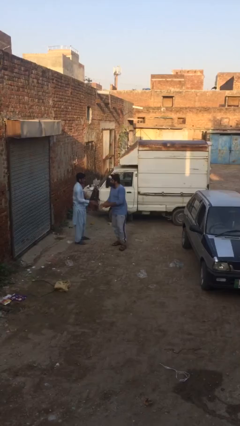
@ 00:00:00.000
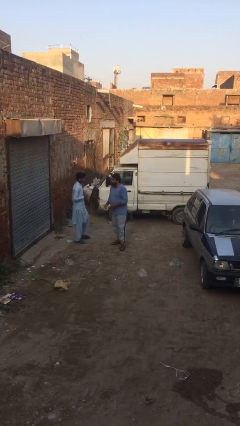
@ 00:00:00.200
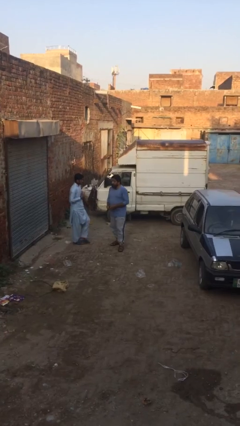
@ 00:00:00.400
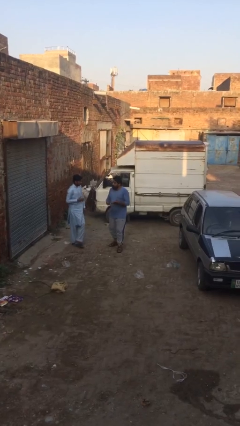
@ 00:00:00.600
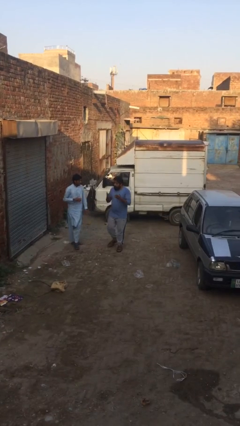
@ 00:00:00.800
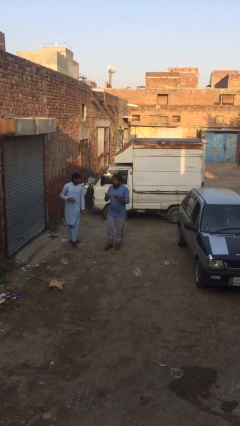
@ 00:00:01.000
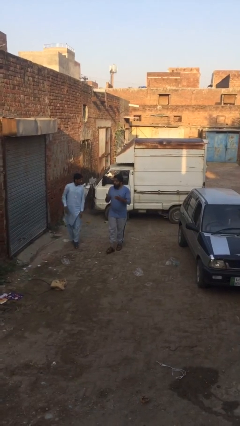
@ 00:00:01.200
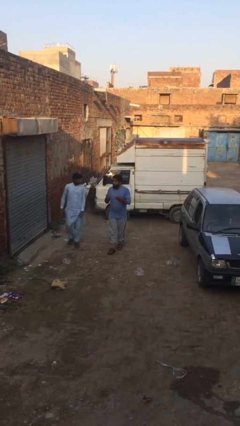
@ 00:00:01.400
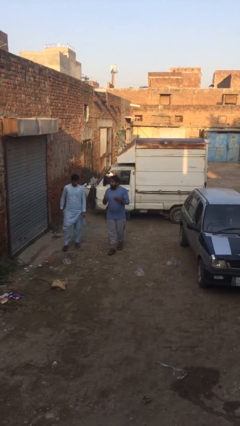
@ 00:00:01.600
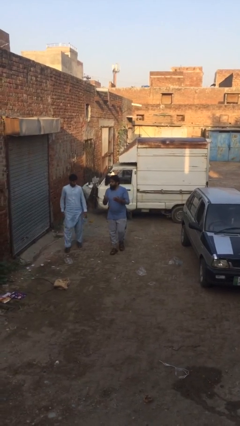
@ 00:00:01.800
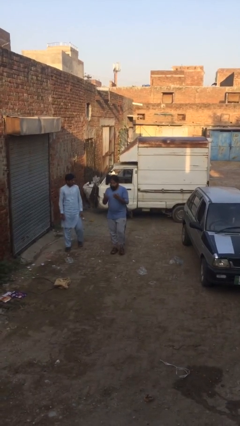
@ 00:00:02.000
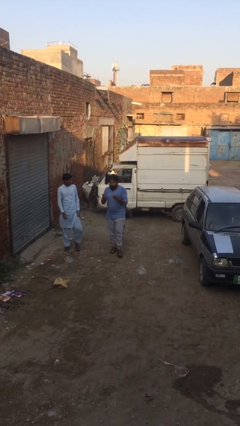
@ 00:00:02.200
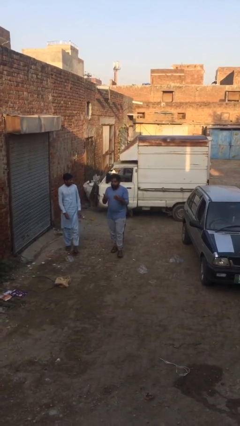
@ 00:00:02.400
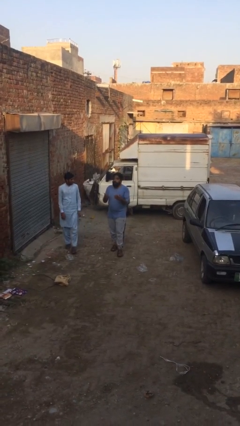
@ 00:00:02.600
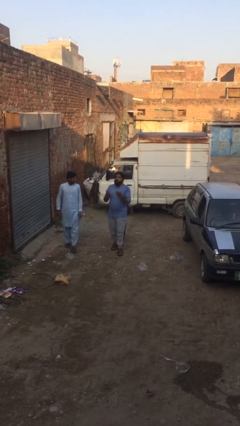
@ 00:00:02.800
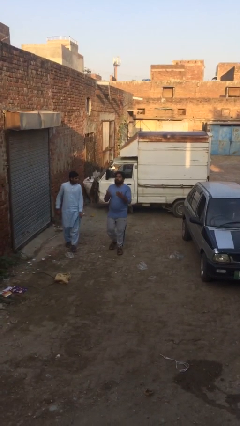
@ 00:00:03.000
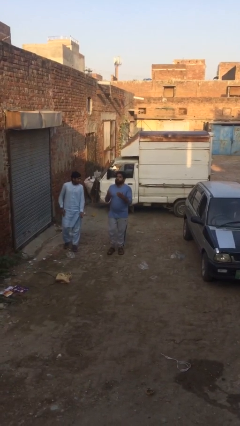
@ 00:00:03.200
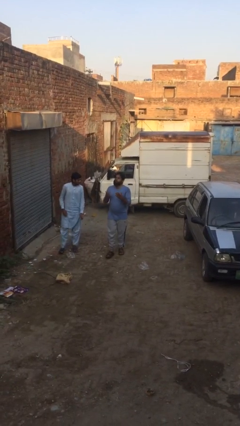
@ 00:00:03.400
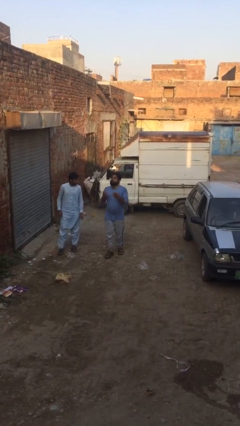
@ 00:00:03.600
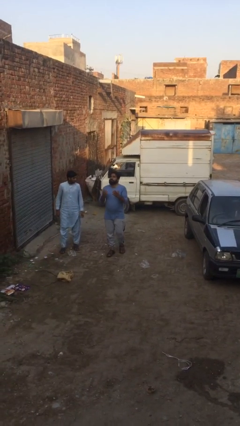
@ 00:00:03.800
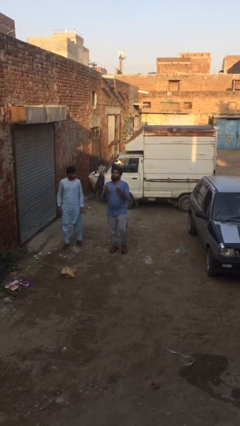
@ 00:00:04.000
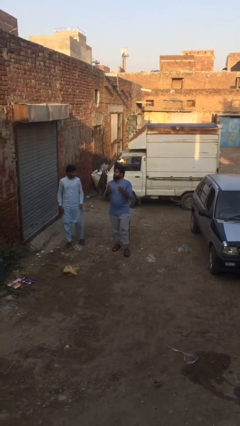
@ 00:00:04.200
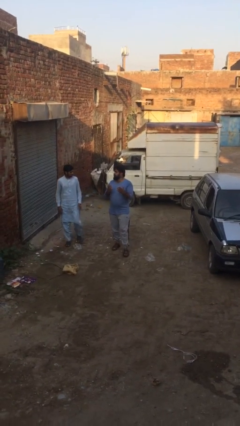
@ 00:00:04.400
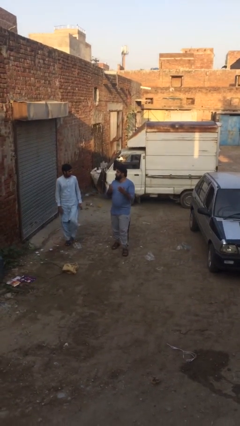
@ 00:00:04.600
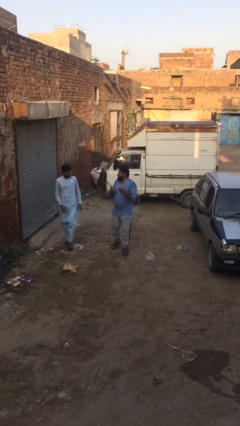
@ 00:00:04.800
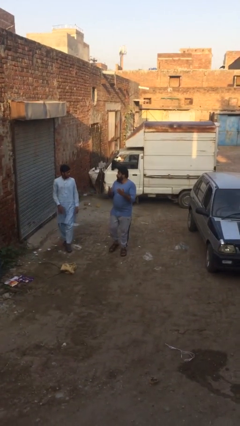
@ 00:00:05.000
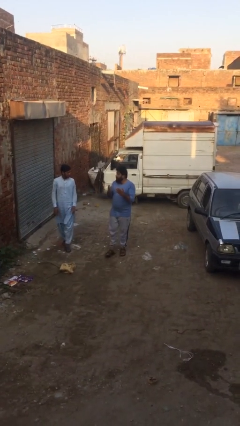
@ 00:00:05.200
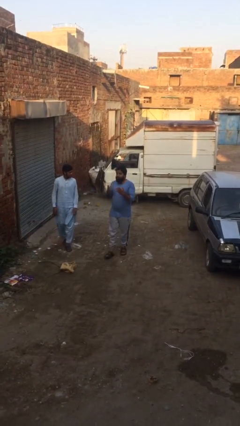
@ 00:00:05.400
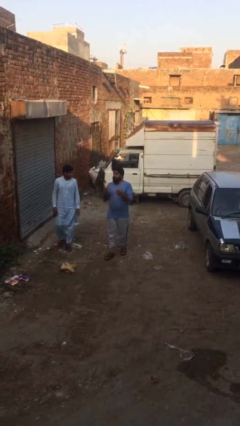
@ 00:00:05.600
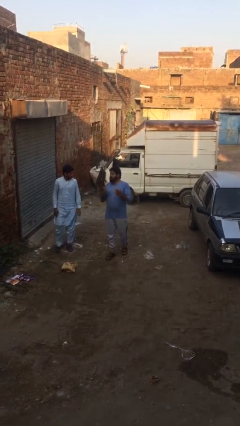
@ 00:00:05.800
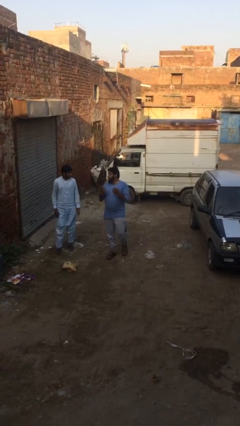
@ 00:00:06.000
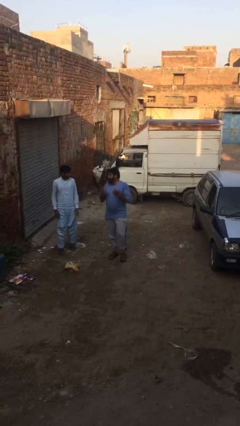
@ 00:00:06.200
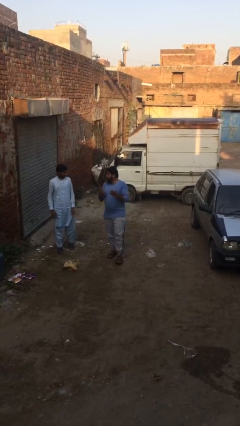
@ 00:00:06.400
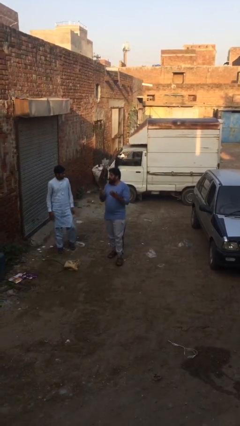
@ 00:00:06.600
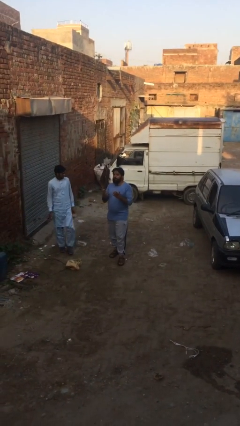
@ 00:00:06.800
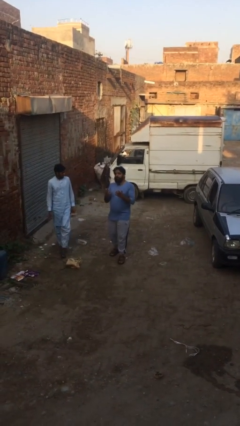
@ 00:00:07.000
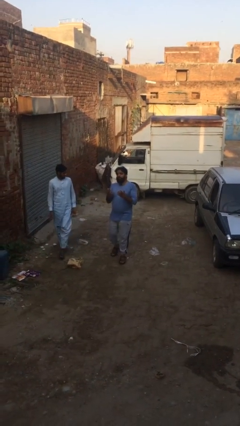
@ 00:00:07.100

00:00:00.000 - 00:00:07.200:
person talks to person

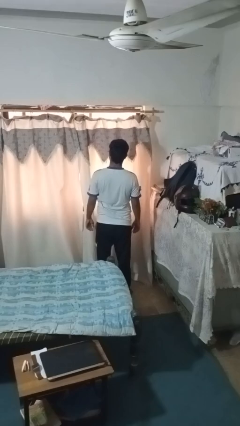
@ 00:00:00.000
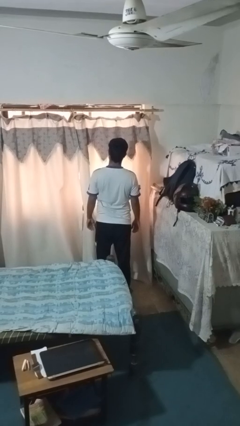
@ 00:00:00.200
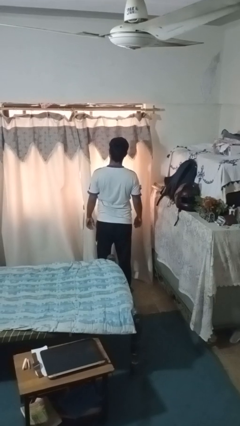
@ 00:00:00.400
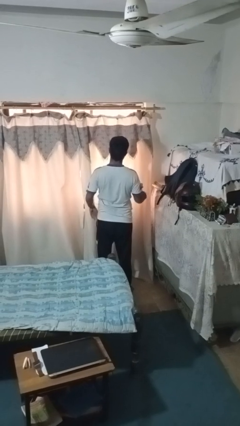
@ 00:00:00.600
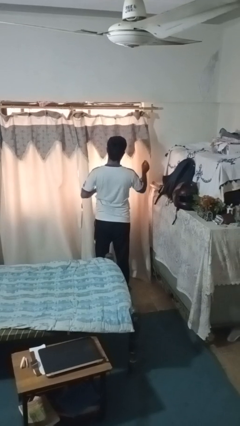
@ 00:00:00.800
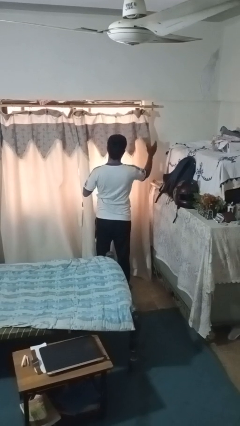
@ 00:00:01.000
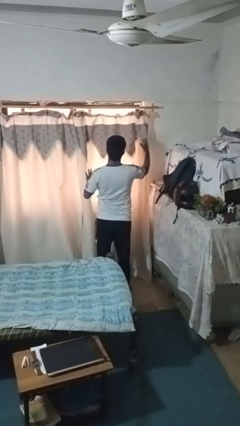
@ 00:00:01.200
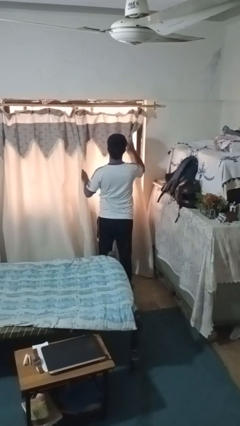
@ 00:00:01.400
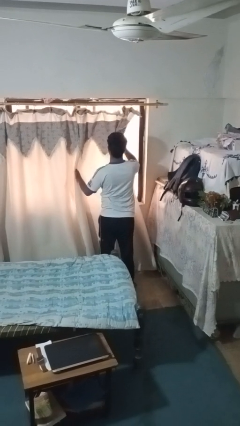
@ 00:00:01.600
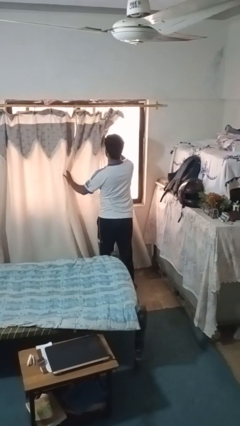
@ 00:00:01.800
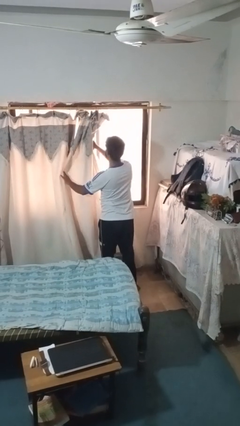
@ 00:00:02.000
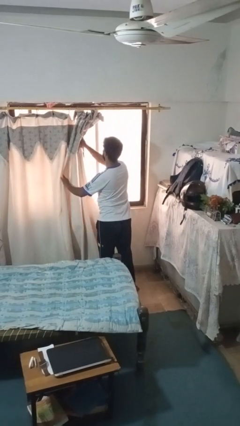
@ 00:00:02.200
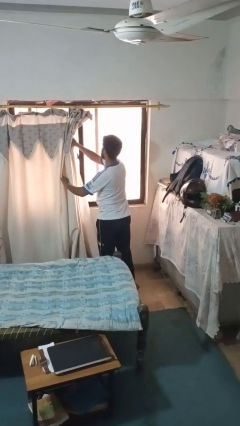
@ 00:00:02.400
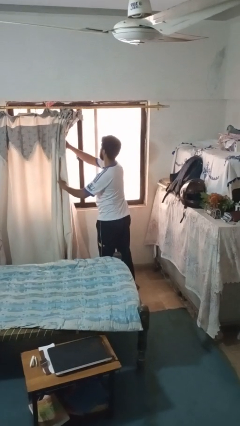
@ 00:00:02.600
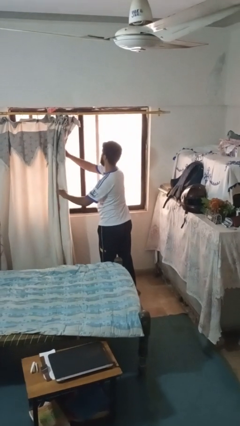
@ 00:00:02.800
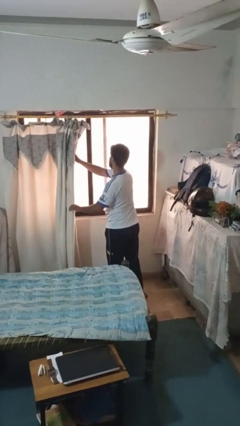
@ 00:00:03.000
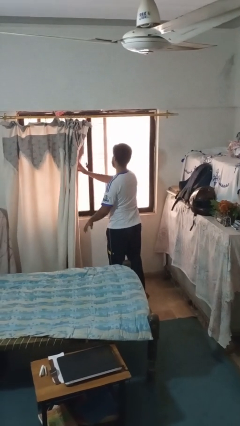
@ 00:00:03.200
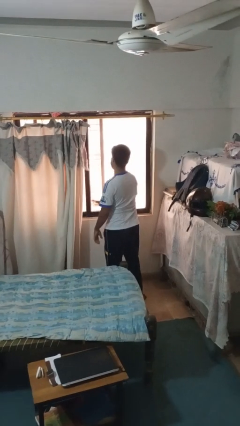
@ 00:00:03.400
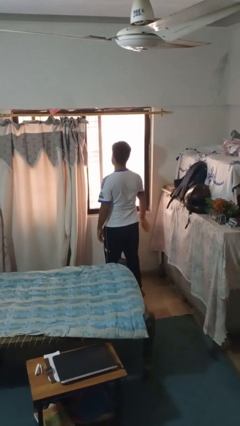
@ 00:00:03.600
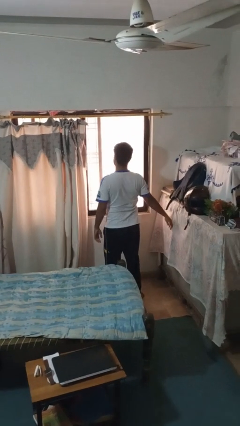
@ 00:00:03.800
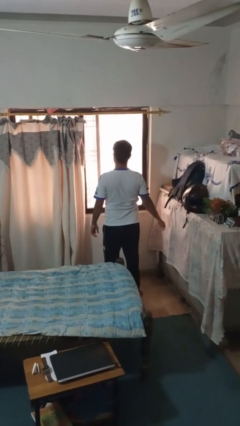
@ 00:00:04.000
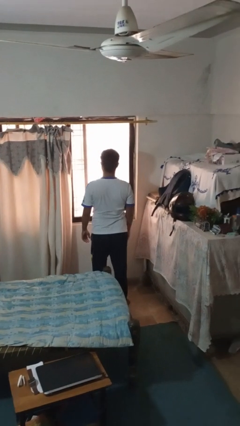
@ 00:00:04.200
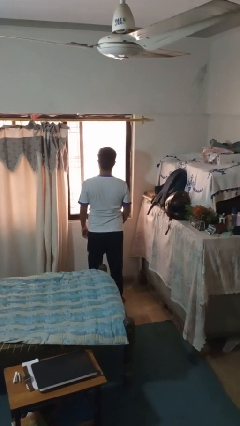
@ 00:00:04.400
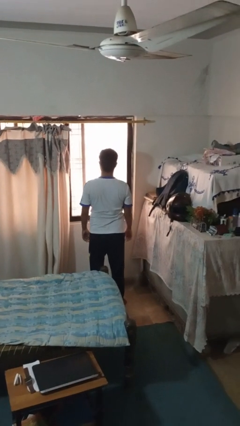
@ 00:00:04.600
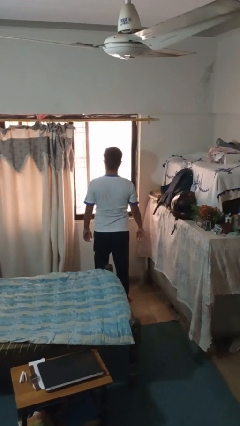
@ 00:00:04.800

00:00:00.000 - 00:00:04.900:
person opens curtains

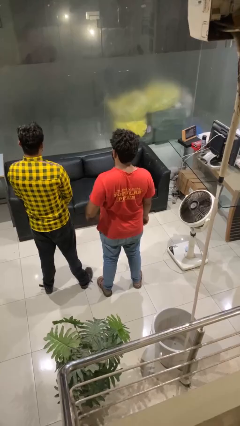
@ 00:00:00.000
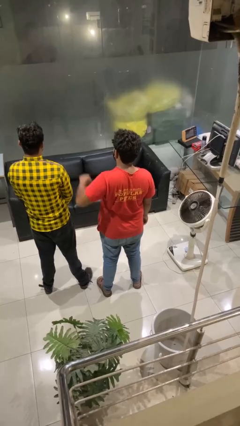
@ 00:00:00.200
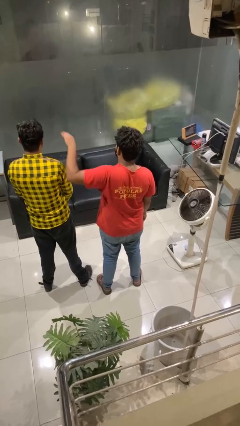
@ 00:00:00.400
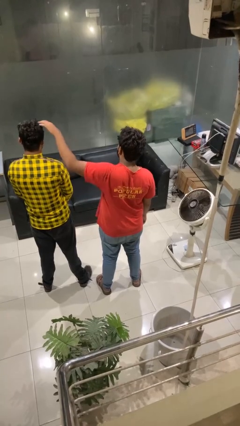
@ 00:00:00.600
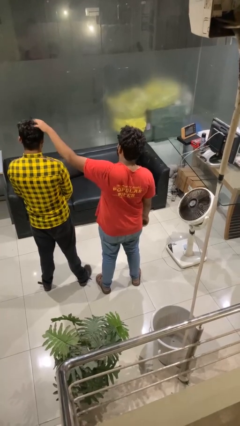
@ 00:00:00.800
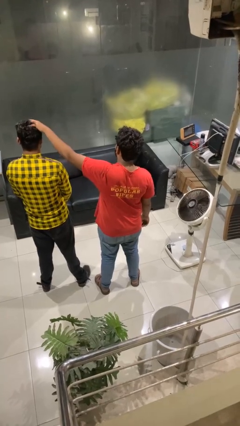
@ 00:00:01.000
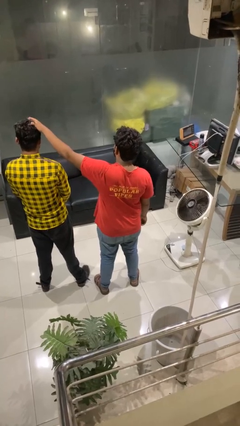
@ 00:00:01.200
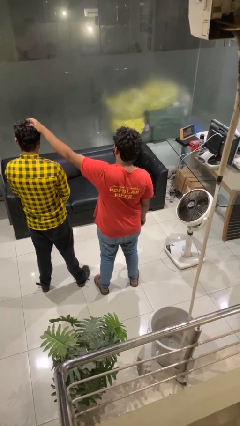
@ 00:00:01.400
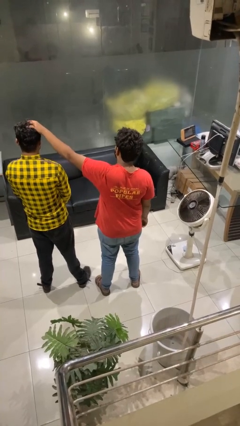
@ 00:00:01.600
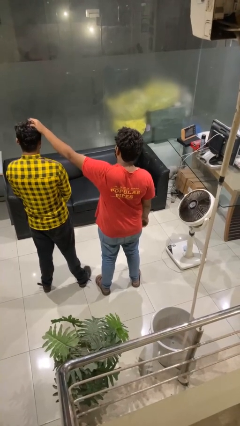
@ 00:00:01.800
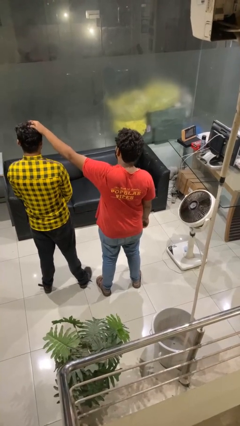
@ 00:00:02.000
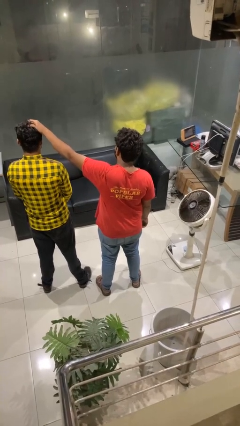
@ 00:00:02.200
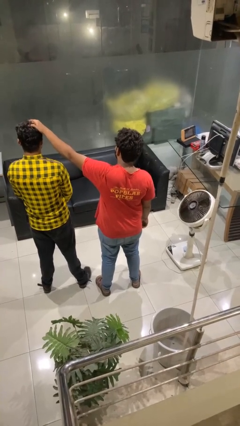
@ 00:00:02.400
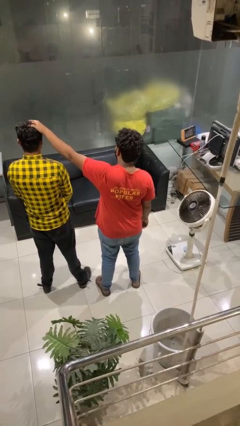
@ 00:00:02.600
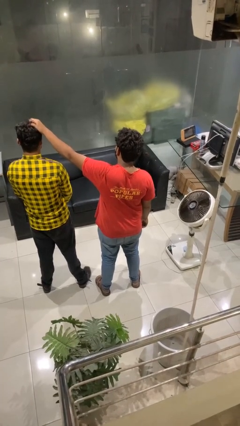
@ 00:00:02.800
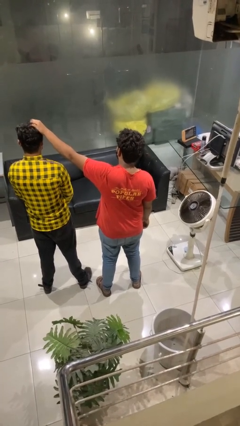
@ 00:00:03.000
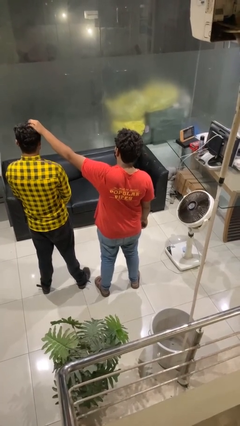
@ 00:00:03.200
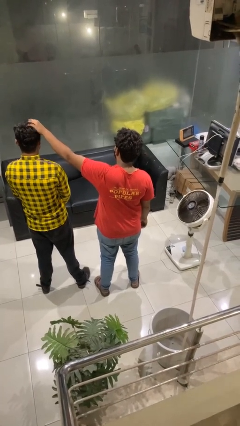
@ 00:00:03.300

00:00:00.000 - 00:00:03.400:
person grabs person by hair

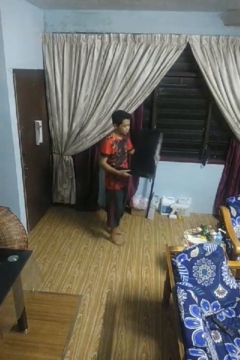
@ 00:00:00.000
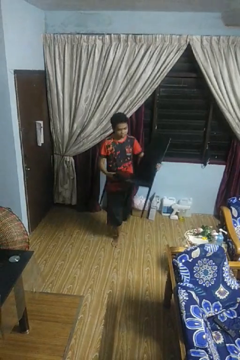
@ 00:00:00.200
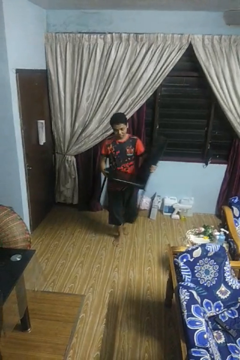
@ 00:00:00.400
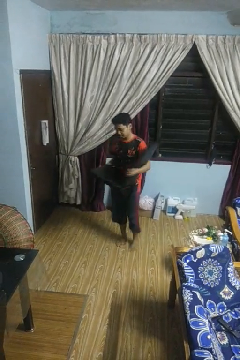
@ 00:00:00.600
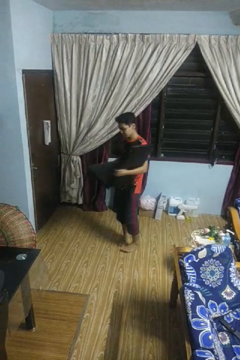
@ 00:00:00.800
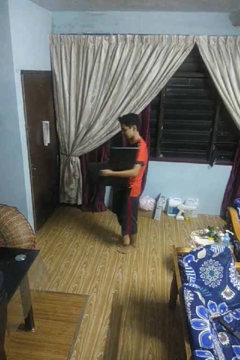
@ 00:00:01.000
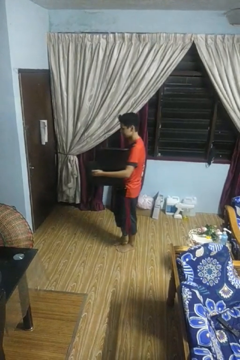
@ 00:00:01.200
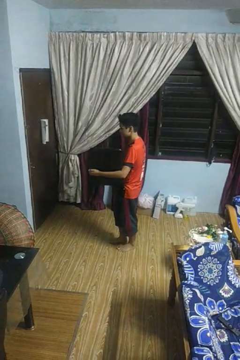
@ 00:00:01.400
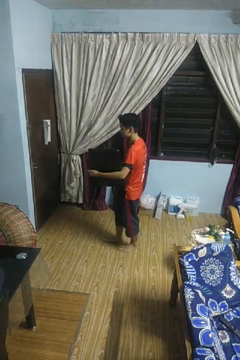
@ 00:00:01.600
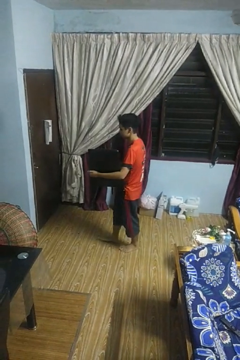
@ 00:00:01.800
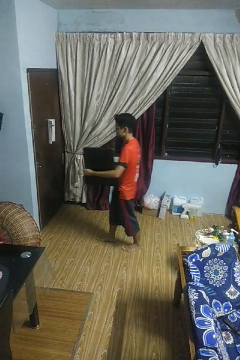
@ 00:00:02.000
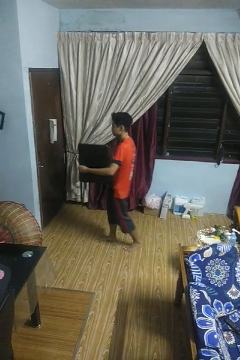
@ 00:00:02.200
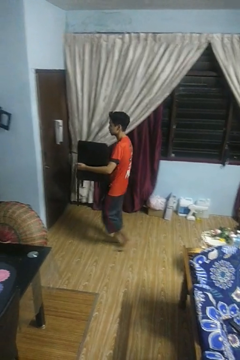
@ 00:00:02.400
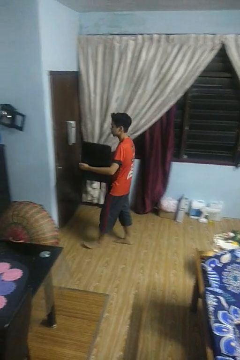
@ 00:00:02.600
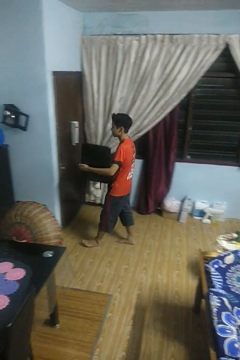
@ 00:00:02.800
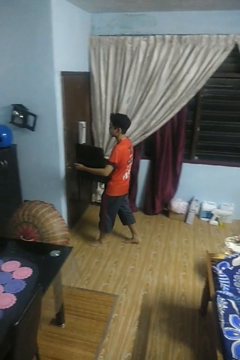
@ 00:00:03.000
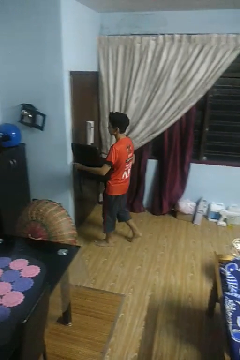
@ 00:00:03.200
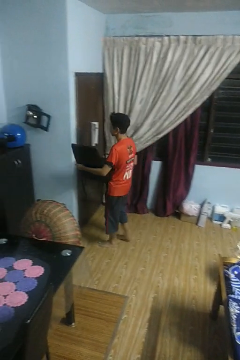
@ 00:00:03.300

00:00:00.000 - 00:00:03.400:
person carries furniture
